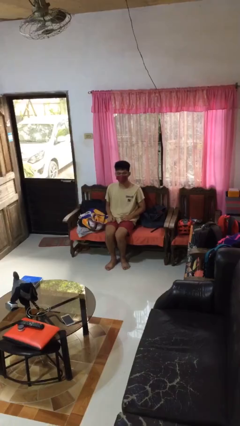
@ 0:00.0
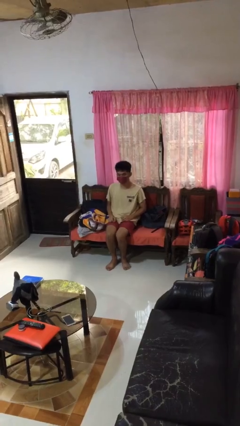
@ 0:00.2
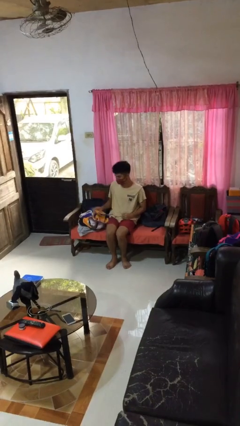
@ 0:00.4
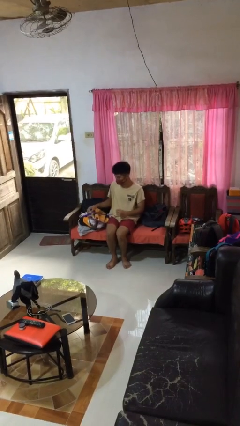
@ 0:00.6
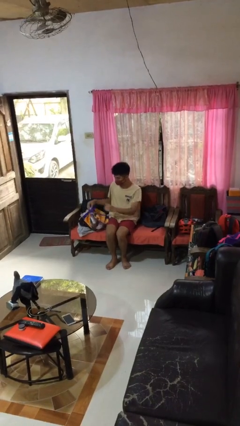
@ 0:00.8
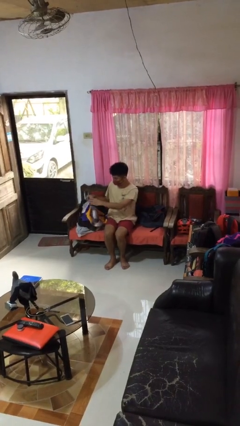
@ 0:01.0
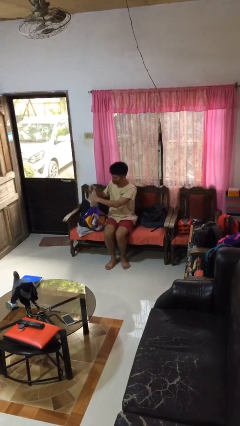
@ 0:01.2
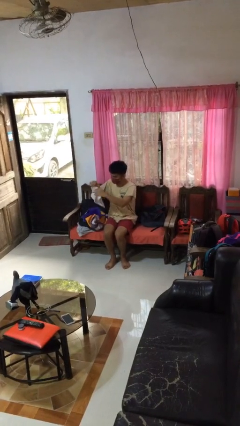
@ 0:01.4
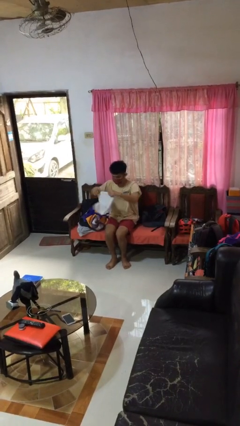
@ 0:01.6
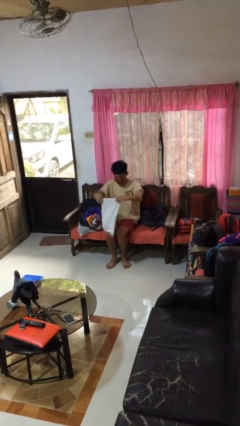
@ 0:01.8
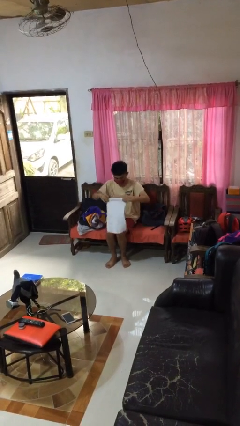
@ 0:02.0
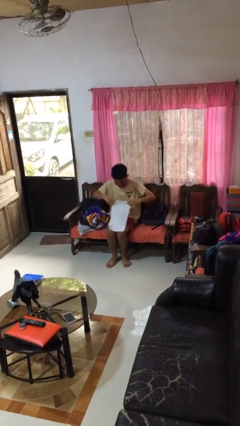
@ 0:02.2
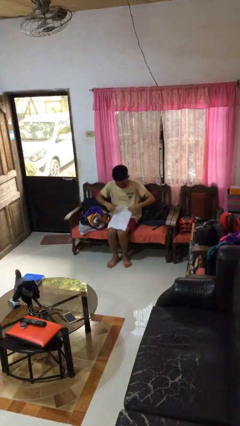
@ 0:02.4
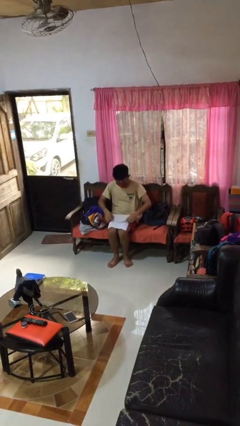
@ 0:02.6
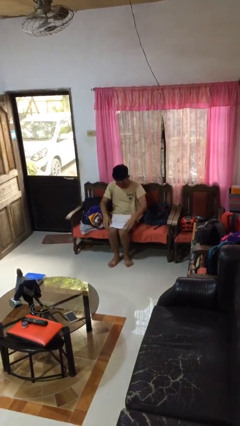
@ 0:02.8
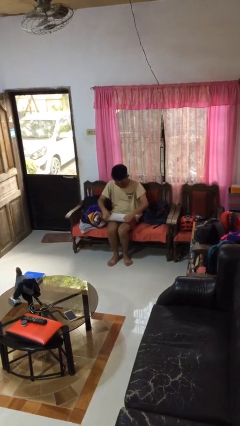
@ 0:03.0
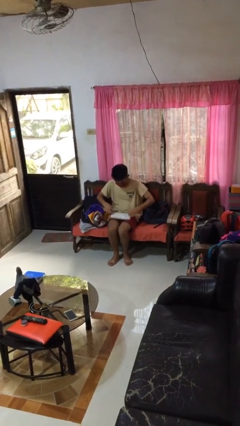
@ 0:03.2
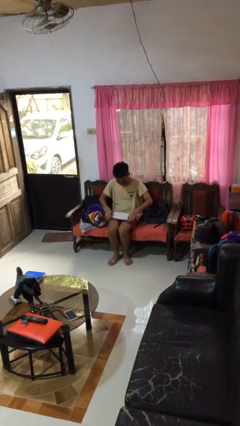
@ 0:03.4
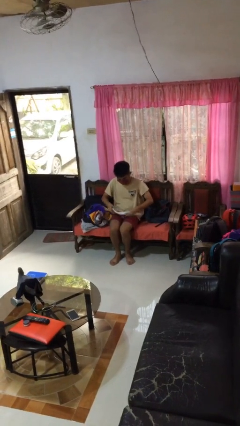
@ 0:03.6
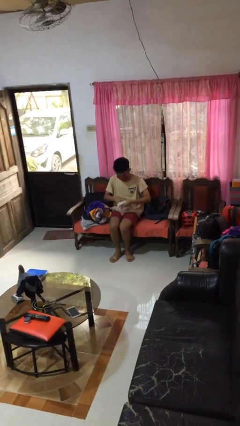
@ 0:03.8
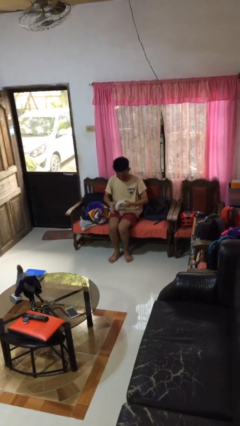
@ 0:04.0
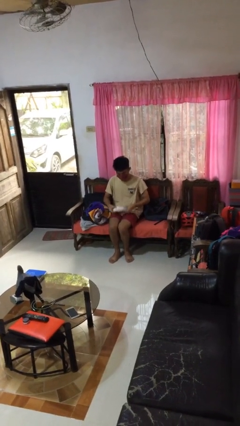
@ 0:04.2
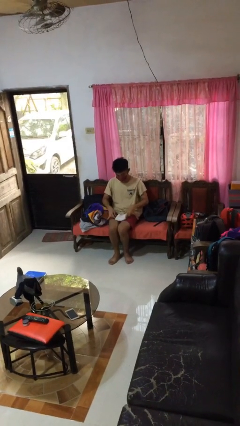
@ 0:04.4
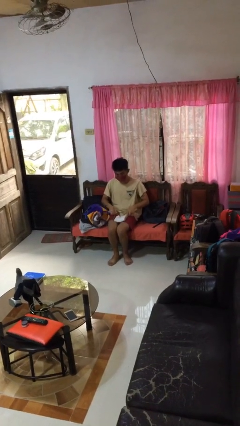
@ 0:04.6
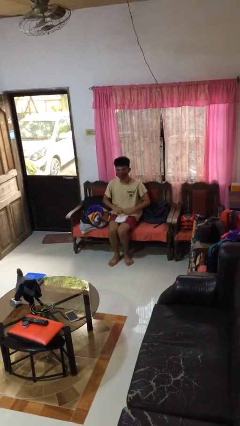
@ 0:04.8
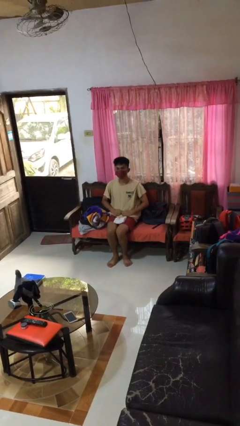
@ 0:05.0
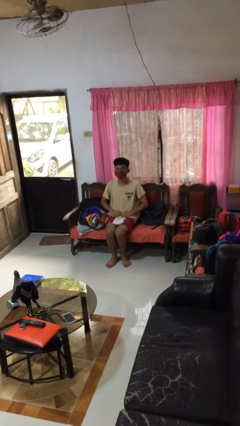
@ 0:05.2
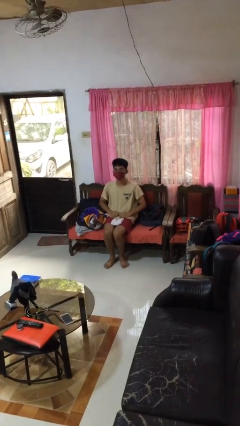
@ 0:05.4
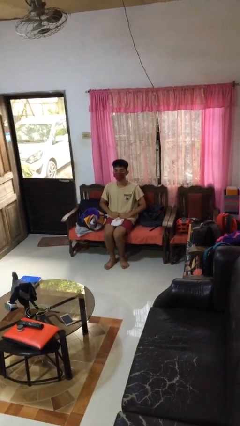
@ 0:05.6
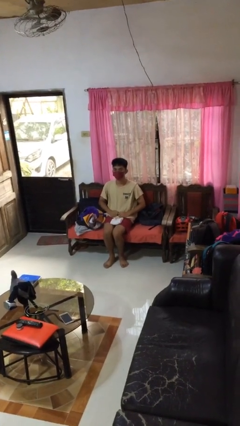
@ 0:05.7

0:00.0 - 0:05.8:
person folds towel

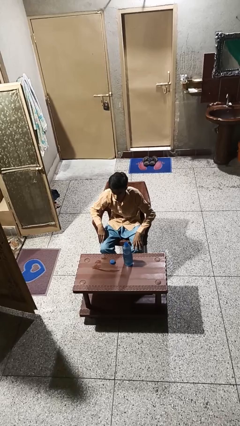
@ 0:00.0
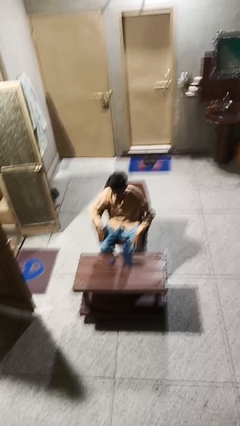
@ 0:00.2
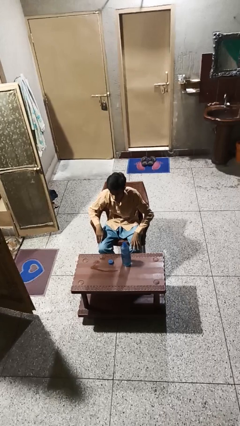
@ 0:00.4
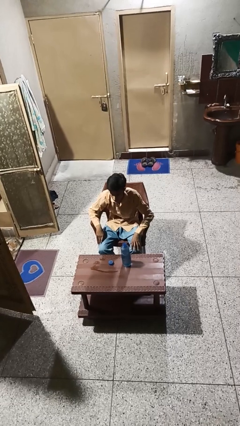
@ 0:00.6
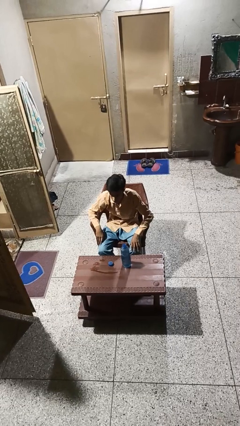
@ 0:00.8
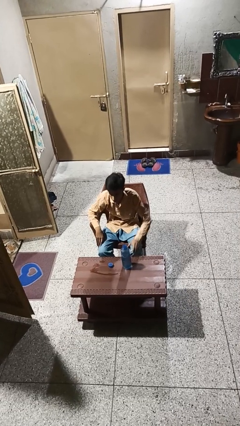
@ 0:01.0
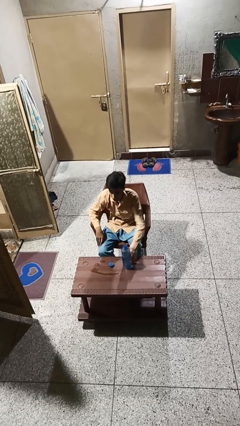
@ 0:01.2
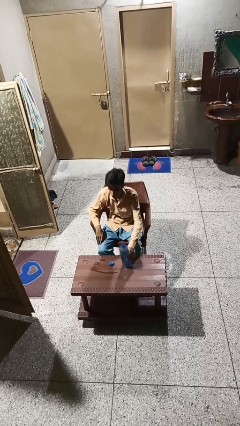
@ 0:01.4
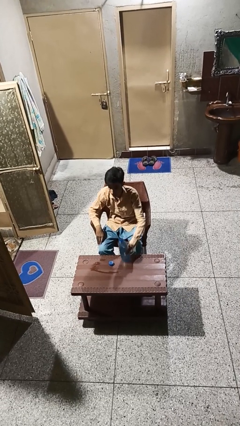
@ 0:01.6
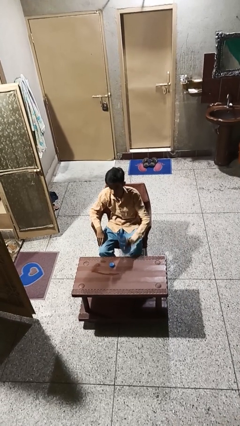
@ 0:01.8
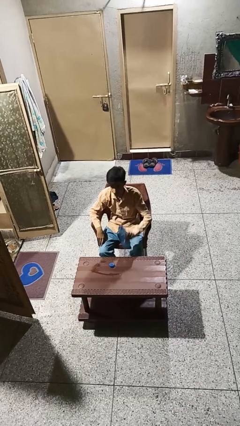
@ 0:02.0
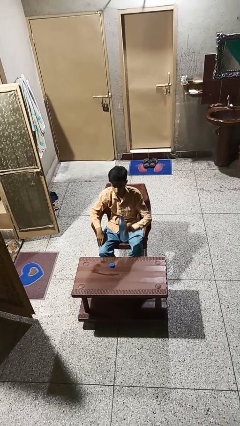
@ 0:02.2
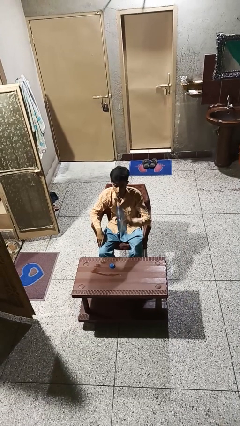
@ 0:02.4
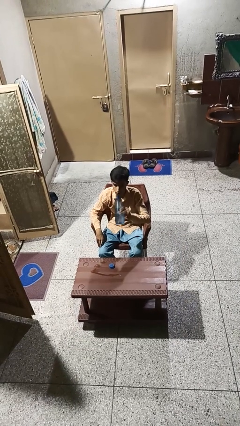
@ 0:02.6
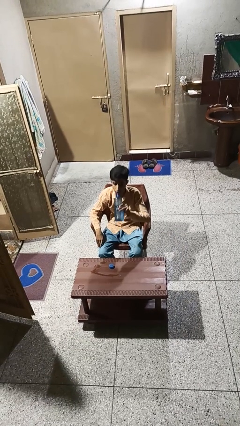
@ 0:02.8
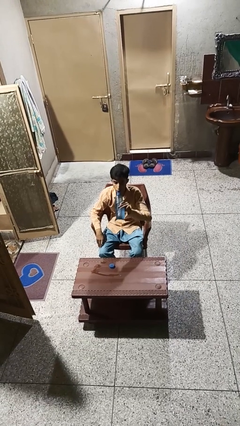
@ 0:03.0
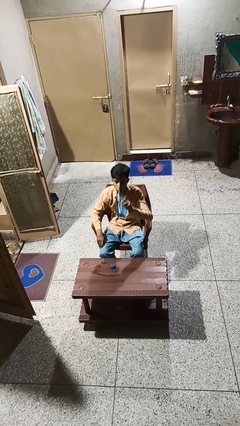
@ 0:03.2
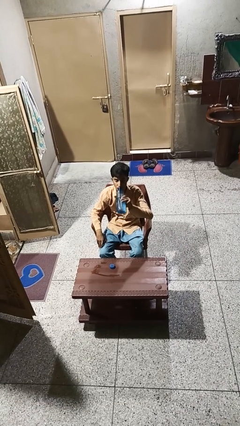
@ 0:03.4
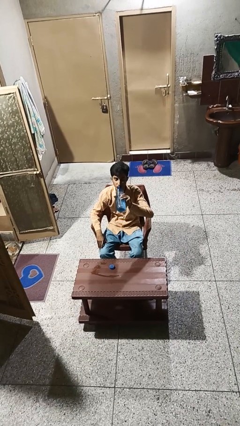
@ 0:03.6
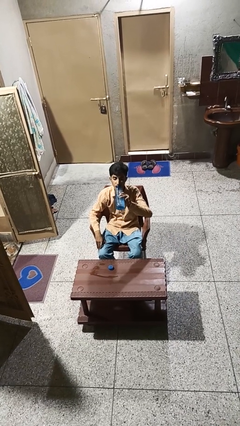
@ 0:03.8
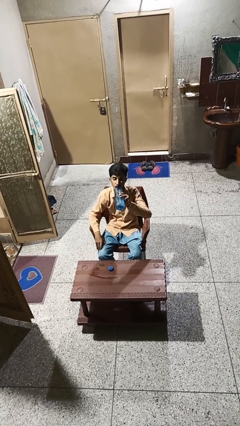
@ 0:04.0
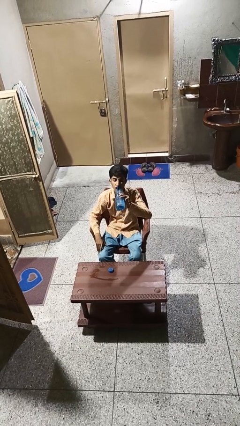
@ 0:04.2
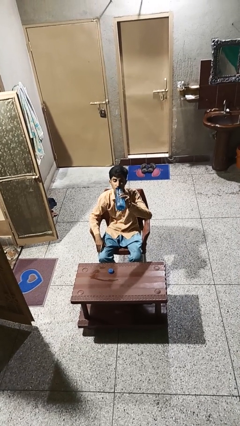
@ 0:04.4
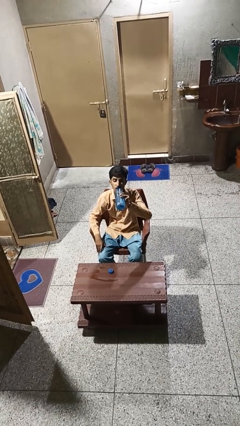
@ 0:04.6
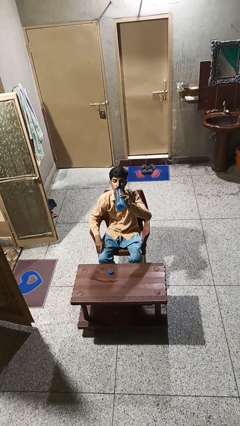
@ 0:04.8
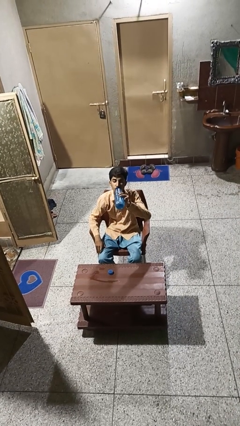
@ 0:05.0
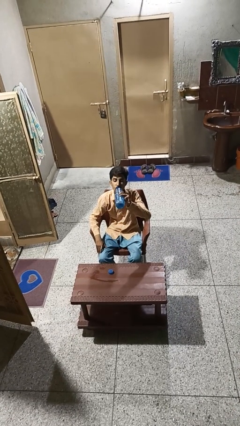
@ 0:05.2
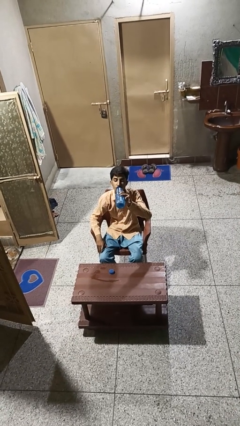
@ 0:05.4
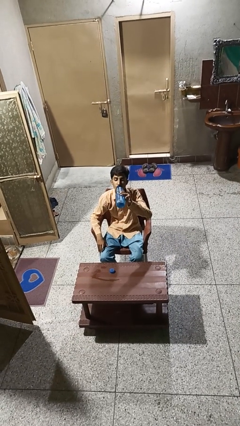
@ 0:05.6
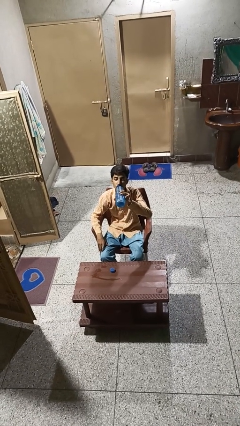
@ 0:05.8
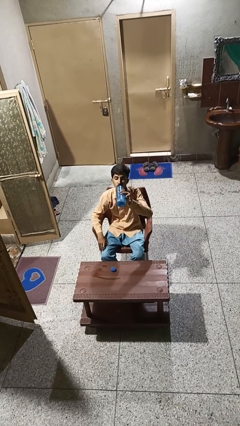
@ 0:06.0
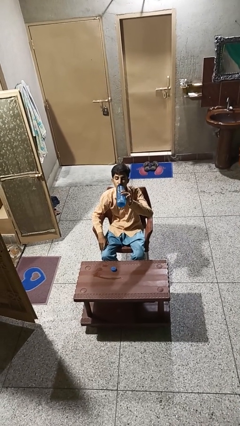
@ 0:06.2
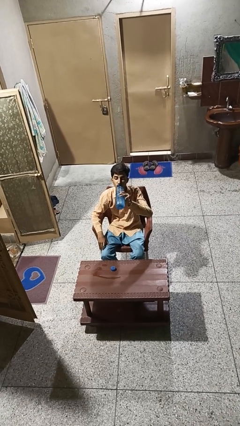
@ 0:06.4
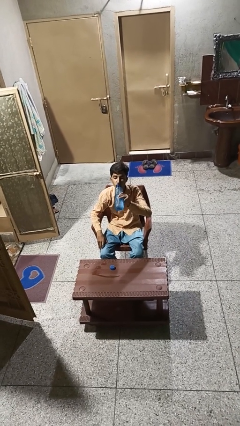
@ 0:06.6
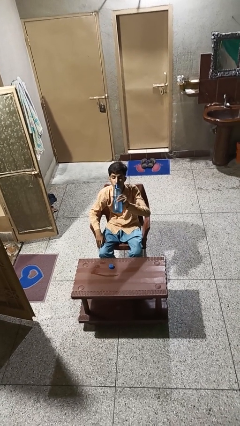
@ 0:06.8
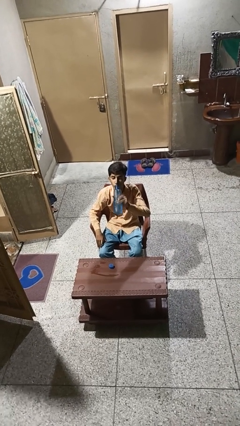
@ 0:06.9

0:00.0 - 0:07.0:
person drinks from bottle

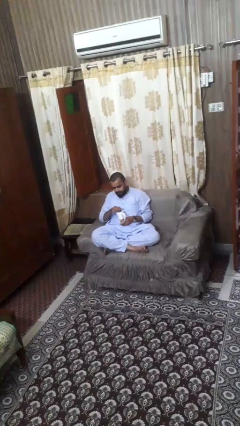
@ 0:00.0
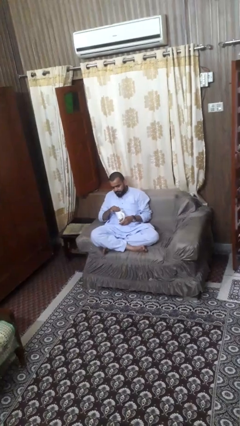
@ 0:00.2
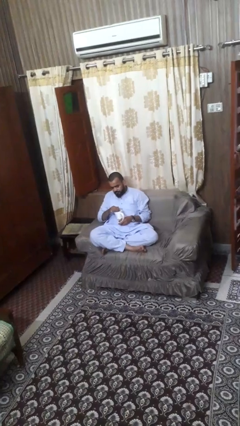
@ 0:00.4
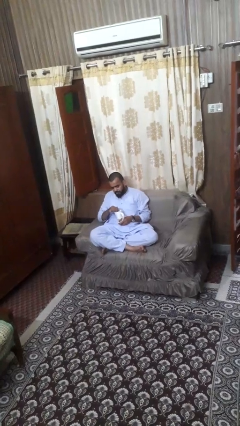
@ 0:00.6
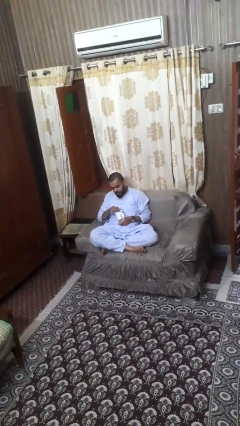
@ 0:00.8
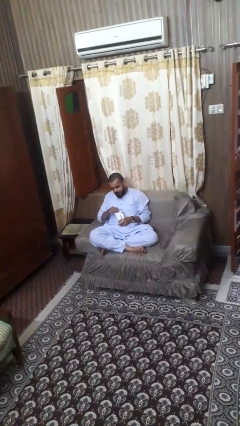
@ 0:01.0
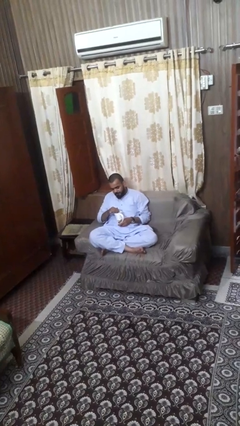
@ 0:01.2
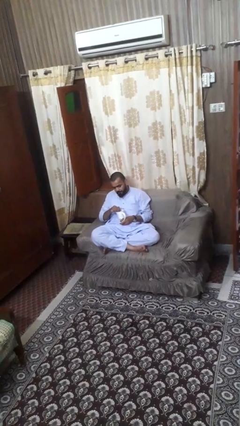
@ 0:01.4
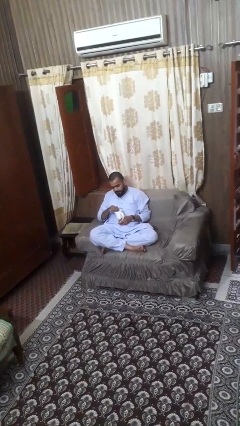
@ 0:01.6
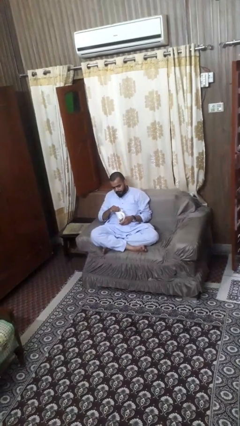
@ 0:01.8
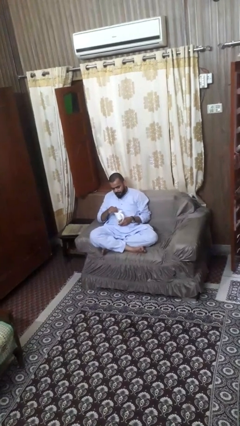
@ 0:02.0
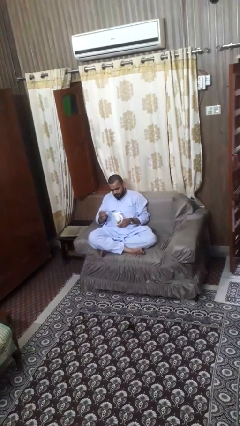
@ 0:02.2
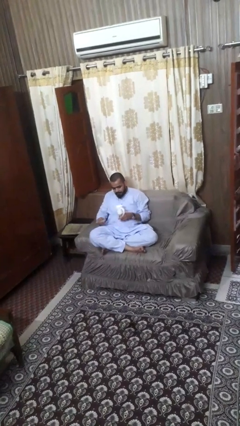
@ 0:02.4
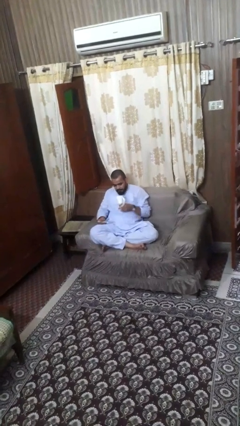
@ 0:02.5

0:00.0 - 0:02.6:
person stirs mug

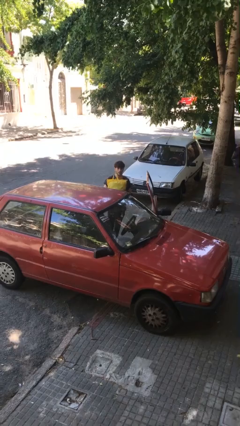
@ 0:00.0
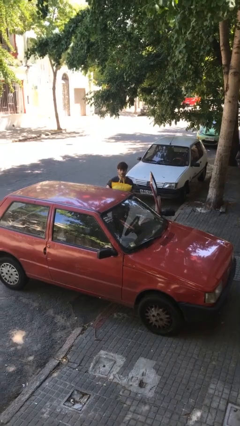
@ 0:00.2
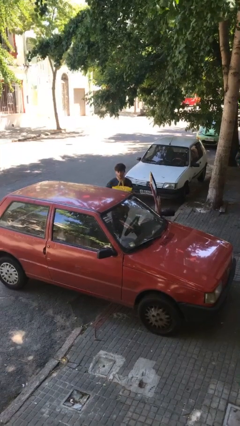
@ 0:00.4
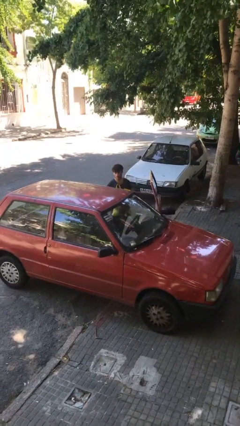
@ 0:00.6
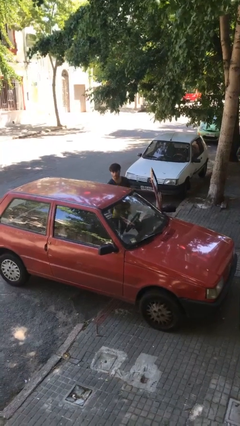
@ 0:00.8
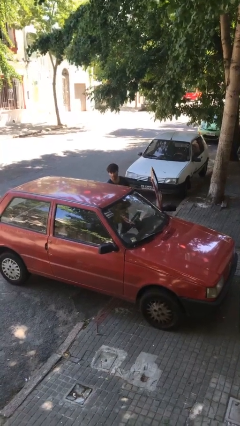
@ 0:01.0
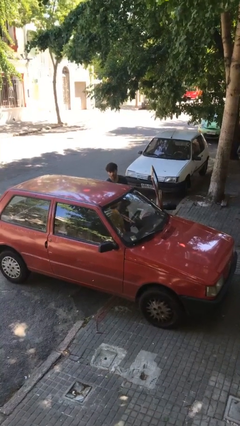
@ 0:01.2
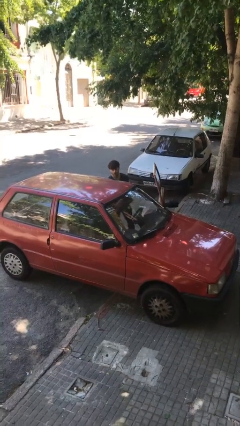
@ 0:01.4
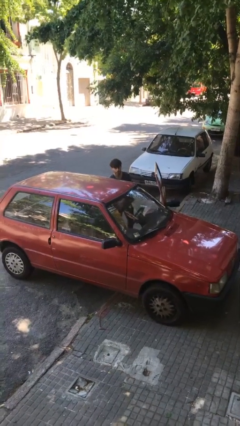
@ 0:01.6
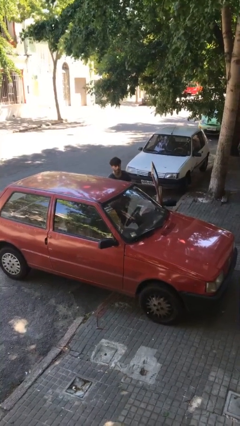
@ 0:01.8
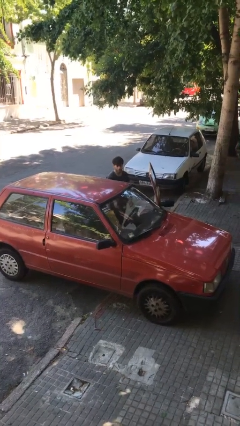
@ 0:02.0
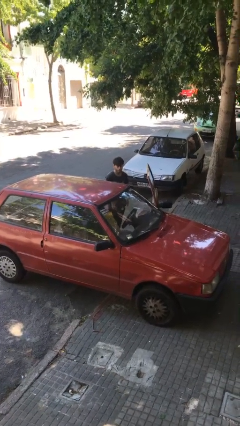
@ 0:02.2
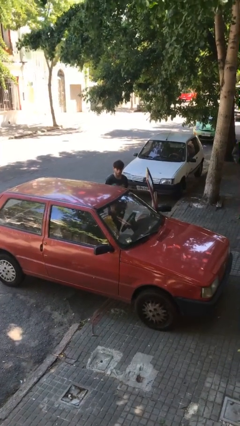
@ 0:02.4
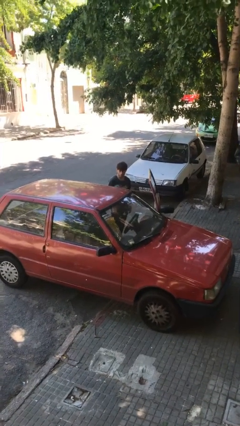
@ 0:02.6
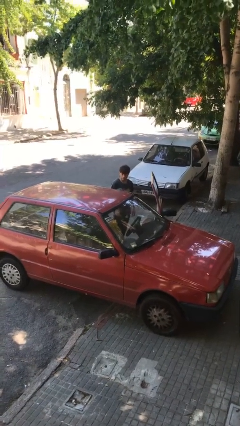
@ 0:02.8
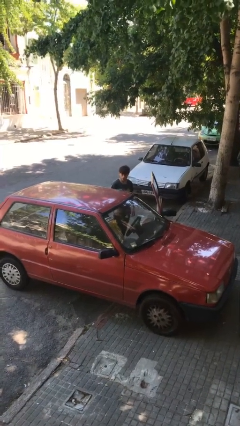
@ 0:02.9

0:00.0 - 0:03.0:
person loads car
